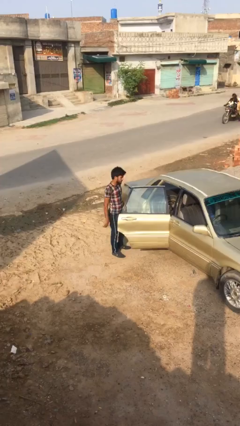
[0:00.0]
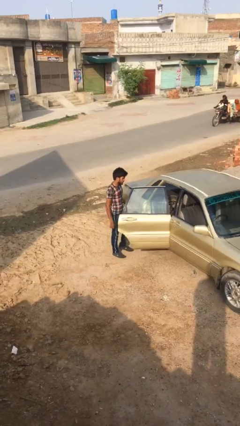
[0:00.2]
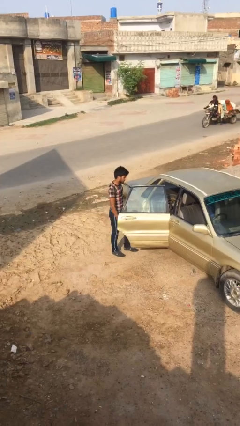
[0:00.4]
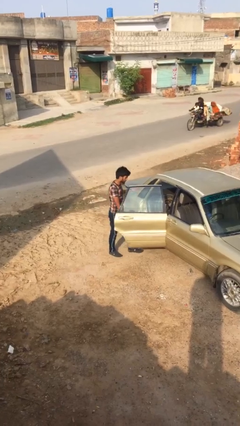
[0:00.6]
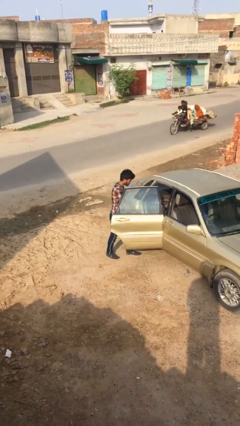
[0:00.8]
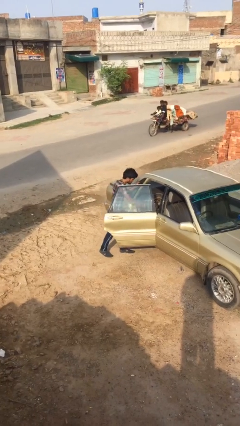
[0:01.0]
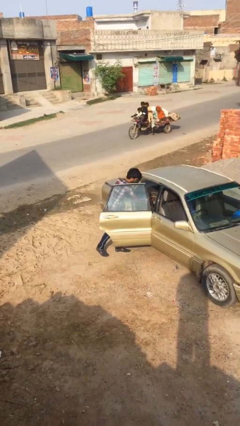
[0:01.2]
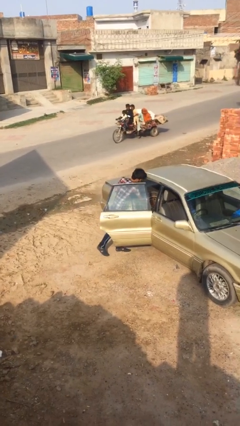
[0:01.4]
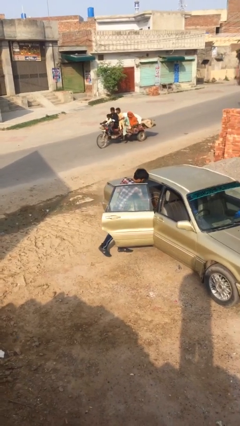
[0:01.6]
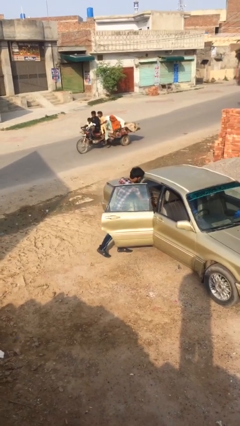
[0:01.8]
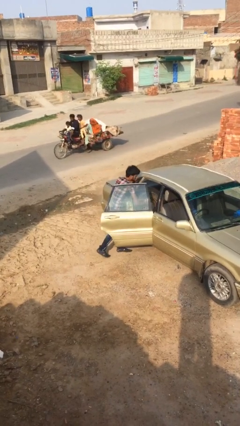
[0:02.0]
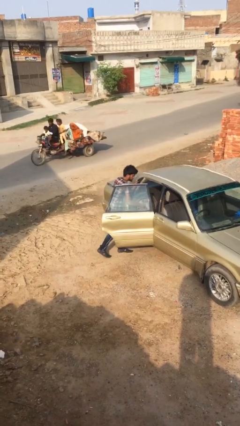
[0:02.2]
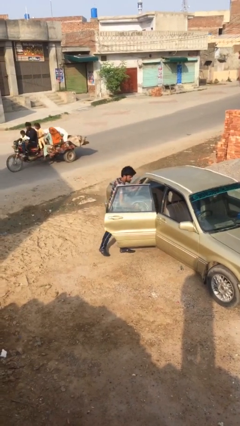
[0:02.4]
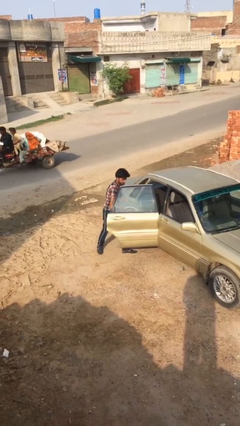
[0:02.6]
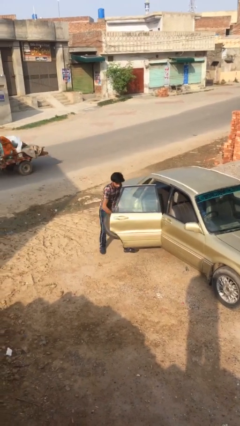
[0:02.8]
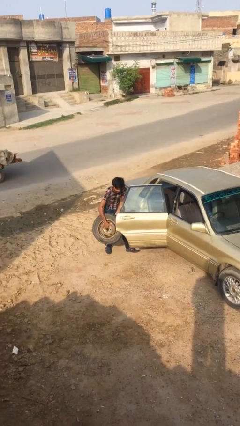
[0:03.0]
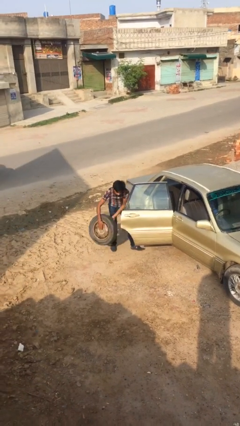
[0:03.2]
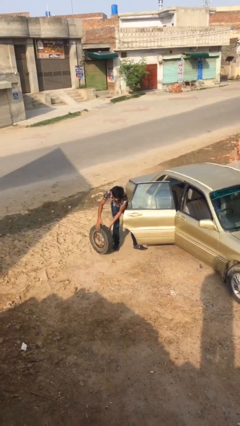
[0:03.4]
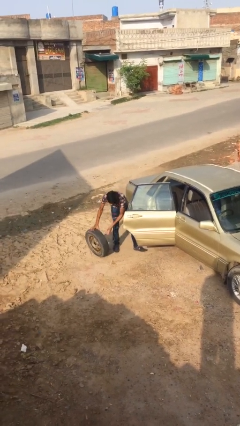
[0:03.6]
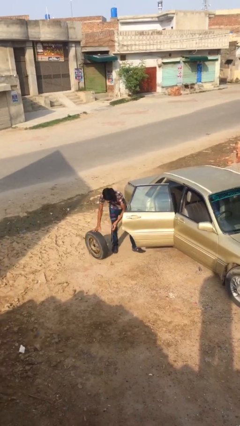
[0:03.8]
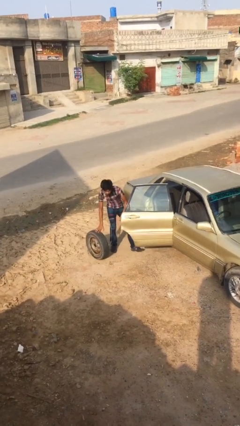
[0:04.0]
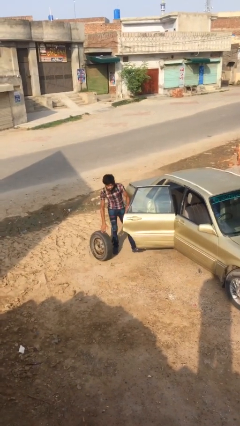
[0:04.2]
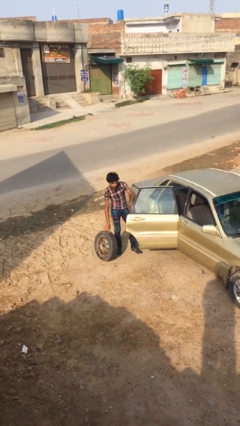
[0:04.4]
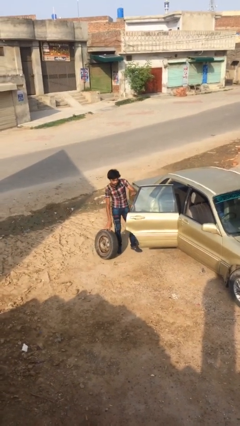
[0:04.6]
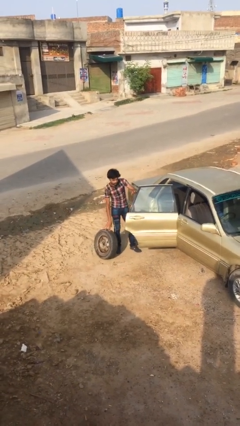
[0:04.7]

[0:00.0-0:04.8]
person unloads car

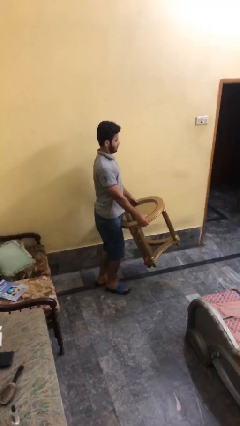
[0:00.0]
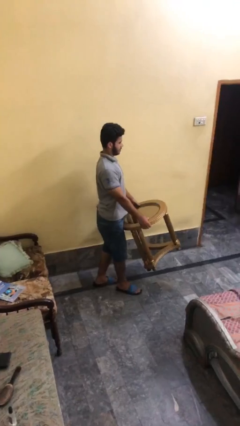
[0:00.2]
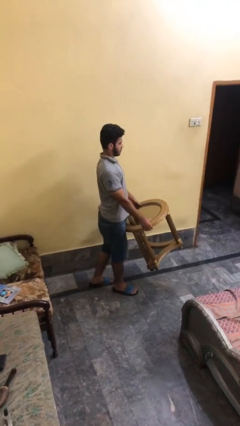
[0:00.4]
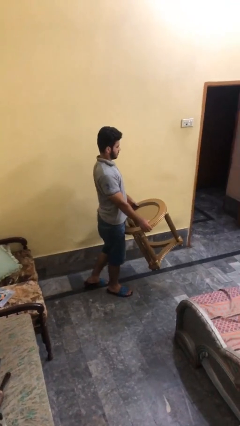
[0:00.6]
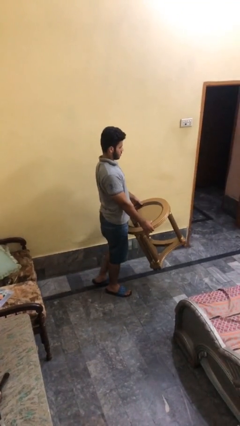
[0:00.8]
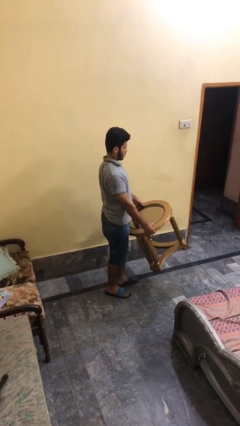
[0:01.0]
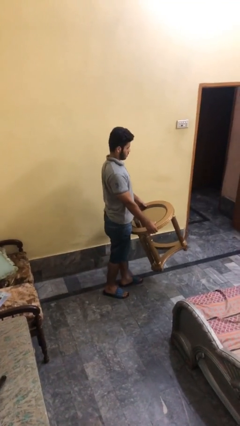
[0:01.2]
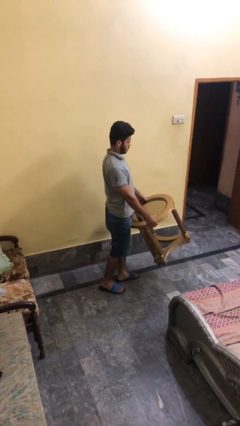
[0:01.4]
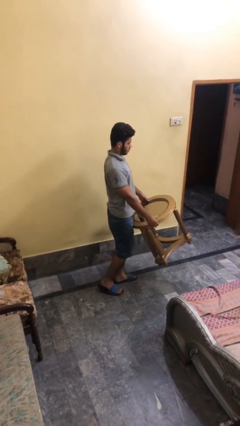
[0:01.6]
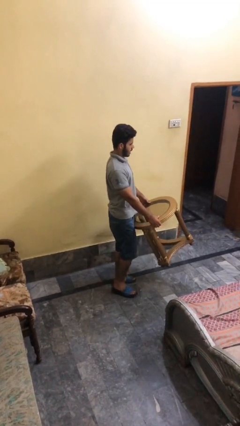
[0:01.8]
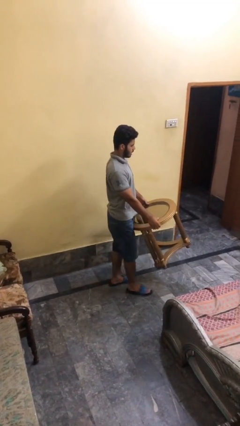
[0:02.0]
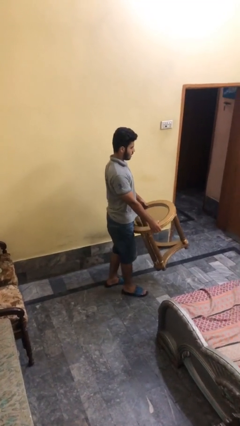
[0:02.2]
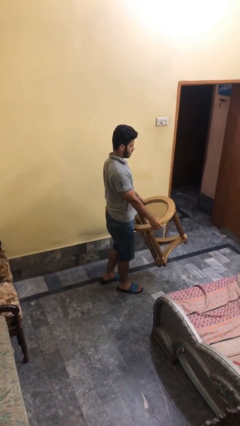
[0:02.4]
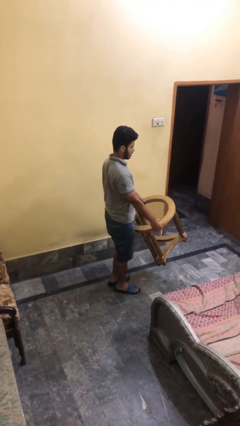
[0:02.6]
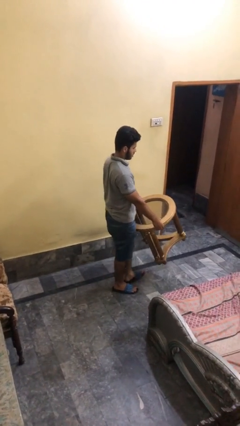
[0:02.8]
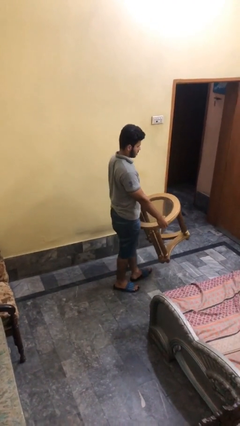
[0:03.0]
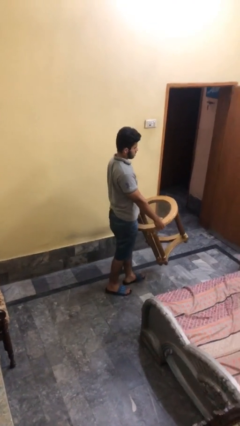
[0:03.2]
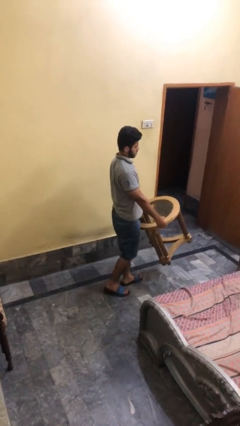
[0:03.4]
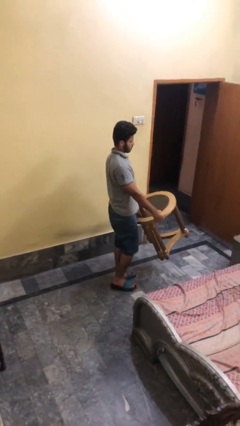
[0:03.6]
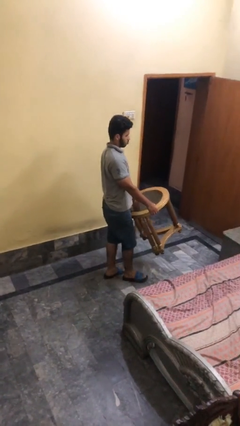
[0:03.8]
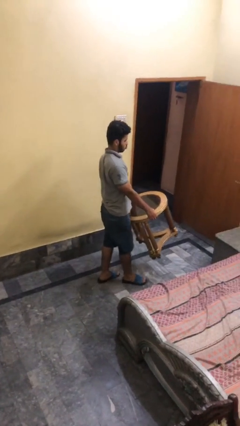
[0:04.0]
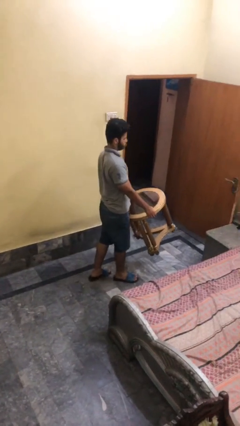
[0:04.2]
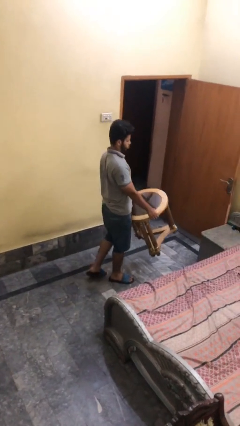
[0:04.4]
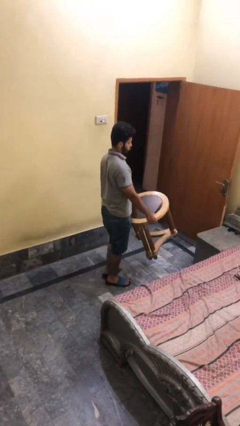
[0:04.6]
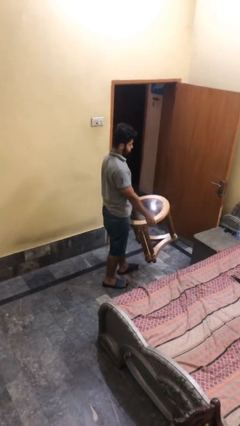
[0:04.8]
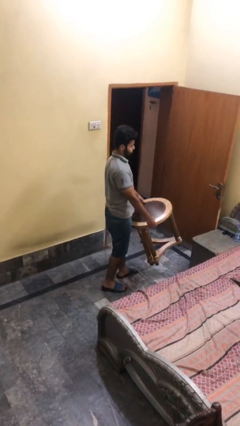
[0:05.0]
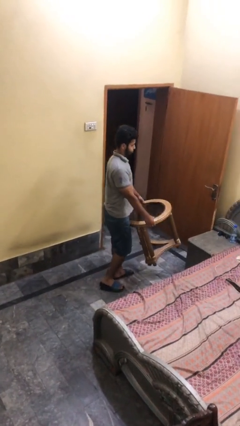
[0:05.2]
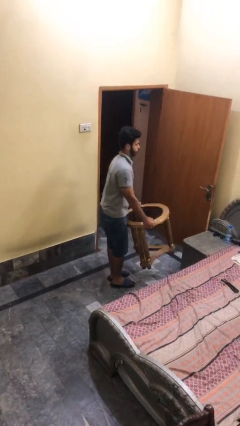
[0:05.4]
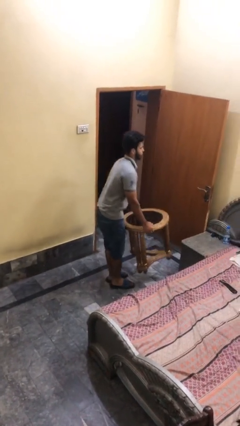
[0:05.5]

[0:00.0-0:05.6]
person carries heavy object

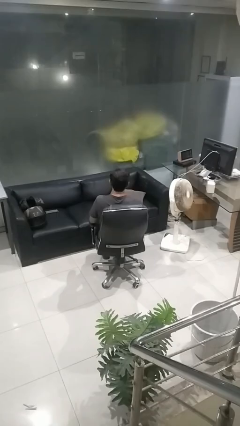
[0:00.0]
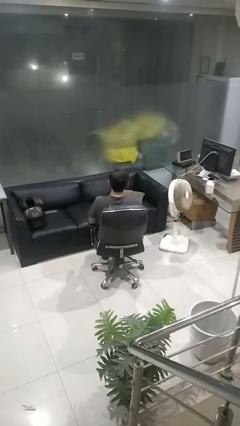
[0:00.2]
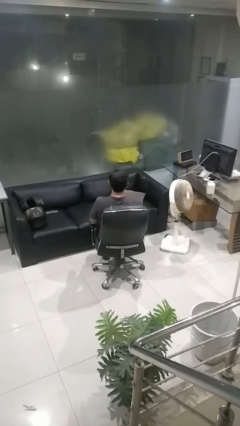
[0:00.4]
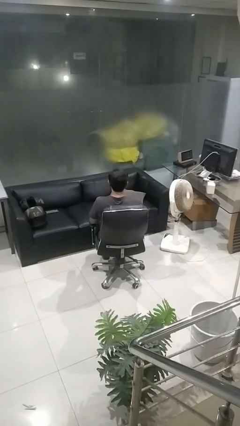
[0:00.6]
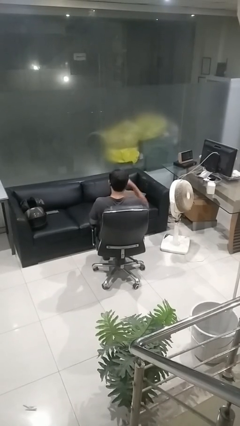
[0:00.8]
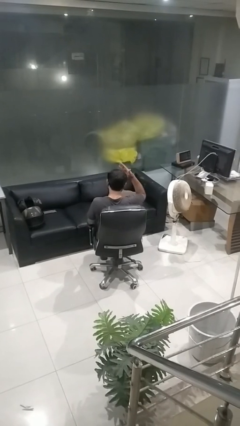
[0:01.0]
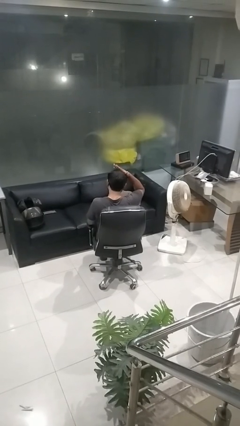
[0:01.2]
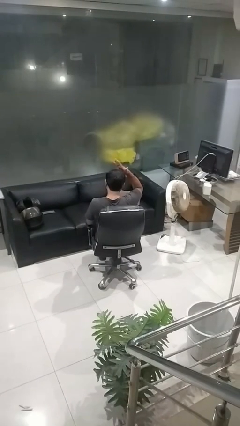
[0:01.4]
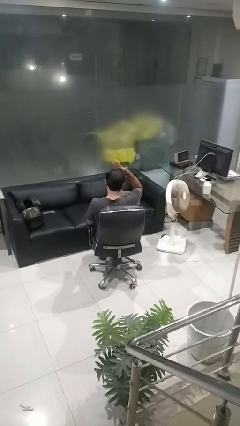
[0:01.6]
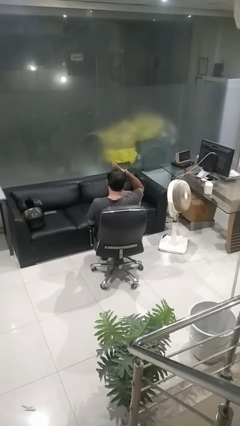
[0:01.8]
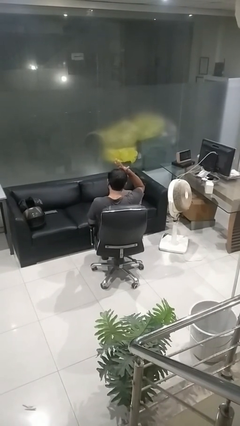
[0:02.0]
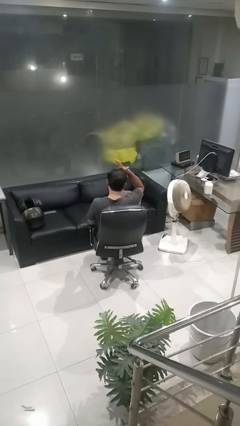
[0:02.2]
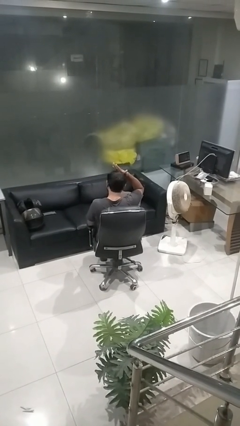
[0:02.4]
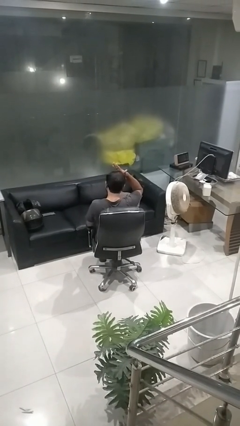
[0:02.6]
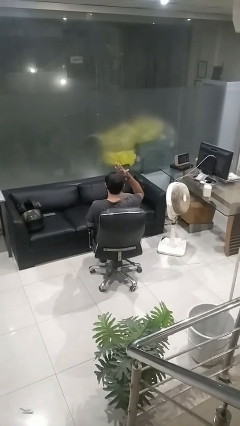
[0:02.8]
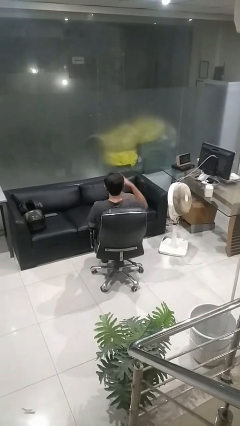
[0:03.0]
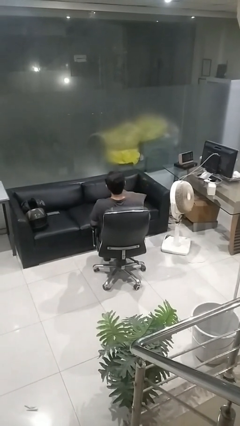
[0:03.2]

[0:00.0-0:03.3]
person pats head

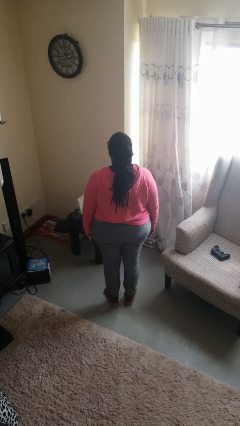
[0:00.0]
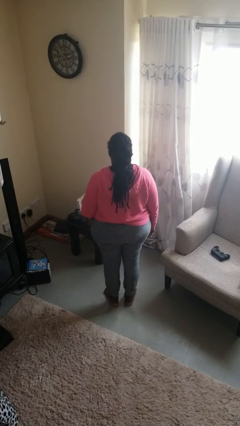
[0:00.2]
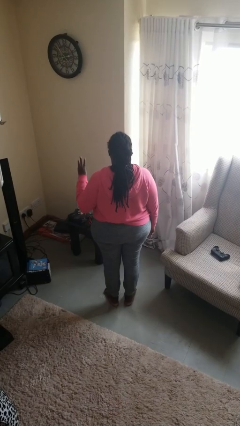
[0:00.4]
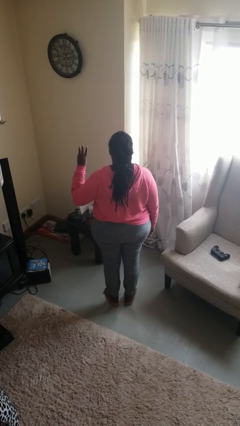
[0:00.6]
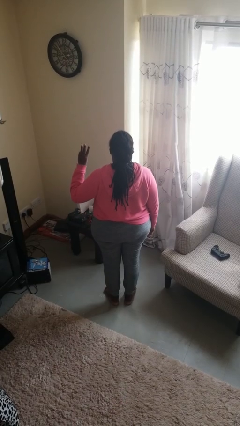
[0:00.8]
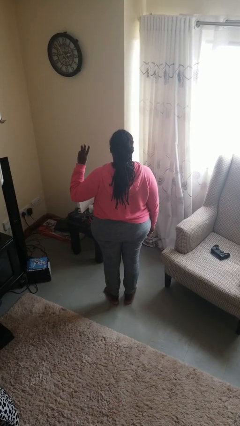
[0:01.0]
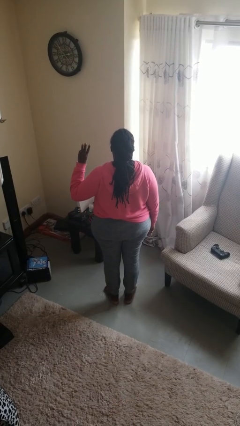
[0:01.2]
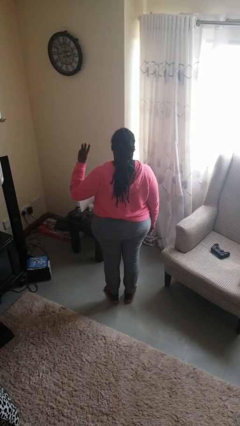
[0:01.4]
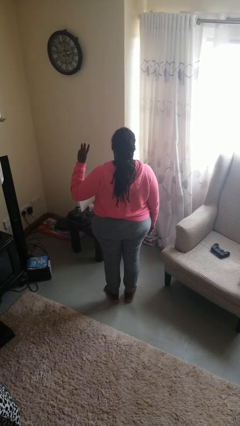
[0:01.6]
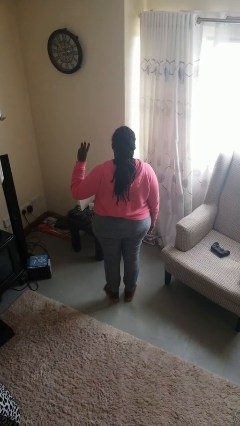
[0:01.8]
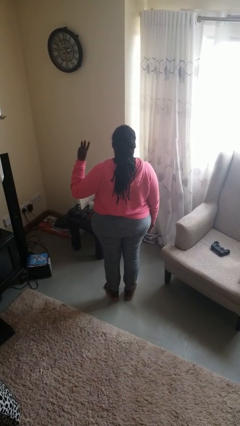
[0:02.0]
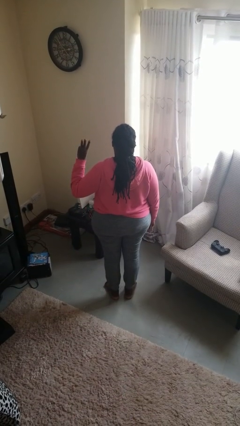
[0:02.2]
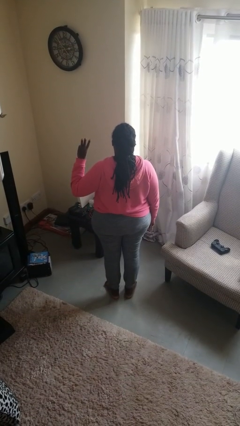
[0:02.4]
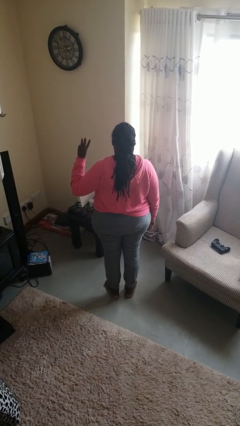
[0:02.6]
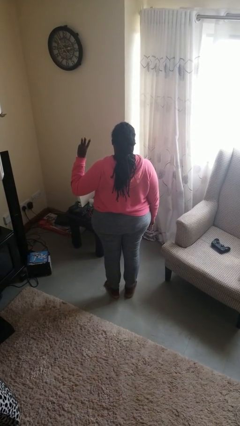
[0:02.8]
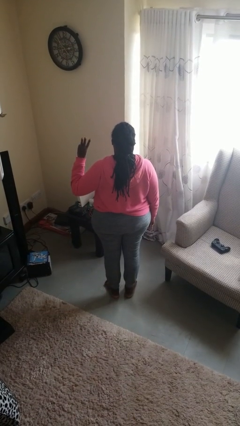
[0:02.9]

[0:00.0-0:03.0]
person gestures number three

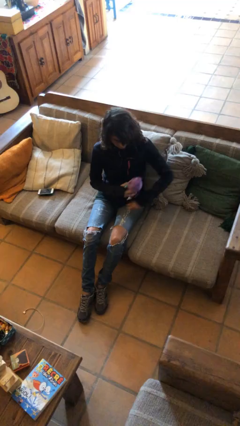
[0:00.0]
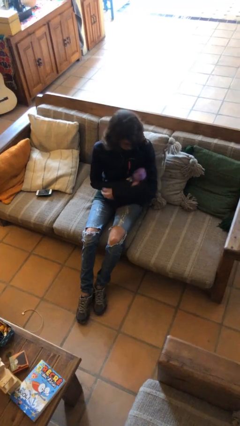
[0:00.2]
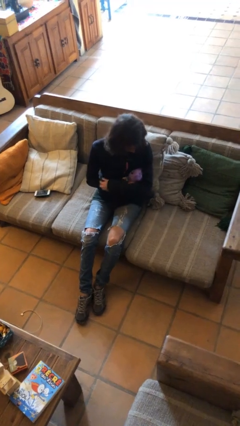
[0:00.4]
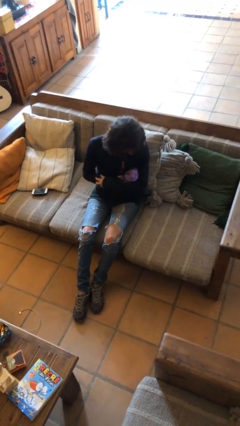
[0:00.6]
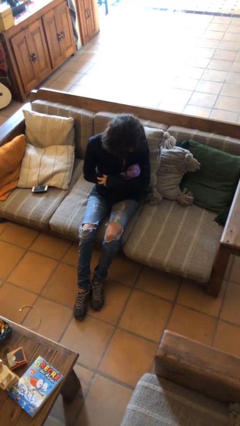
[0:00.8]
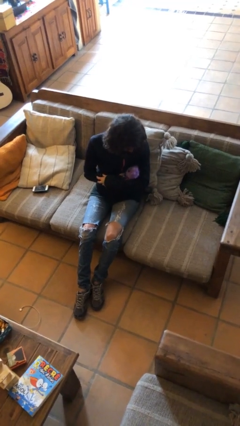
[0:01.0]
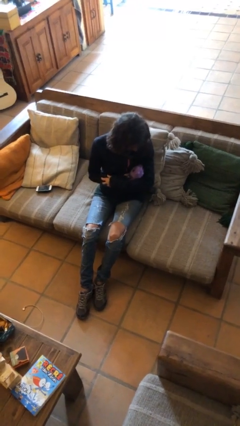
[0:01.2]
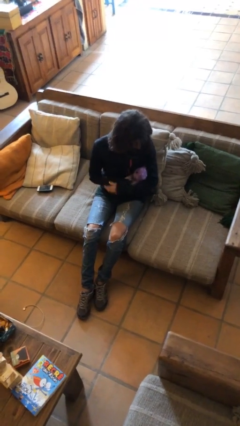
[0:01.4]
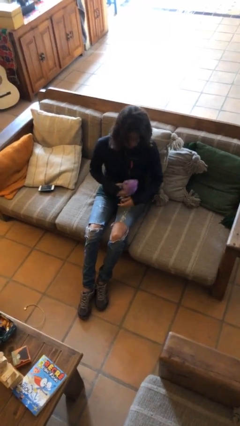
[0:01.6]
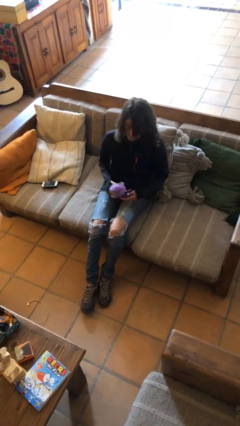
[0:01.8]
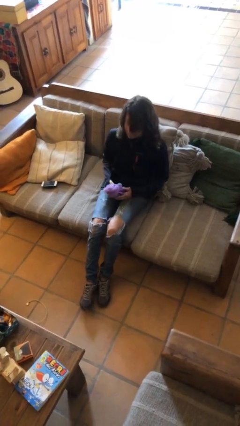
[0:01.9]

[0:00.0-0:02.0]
person hugs stuffed animal
